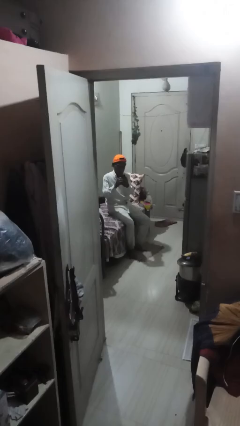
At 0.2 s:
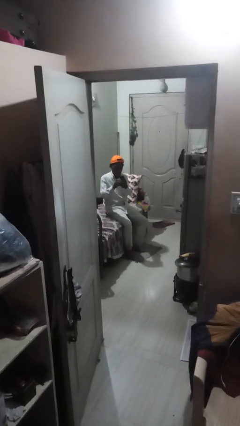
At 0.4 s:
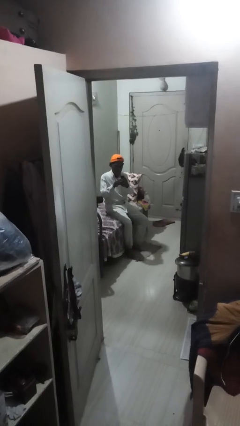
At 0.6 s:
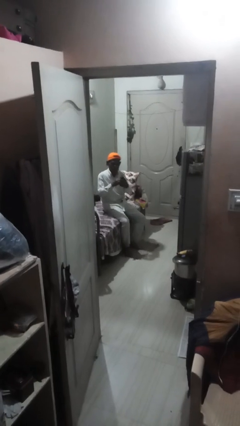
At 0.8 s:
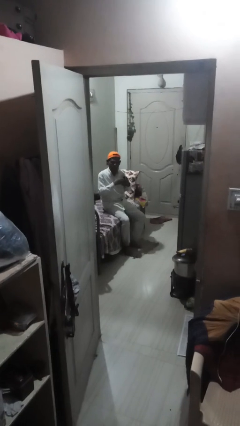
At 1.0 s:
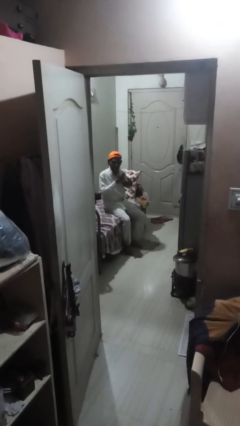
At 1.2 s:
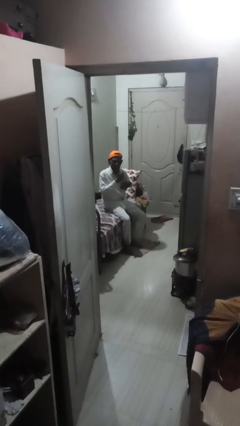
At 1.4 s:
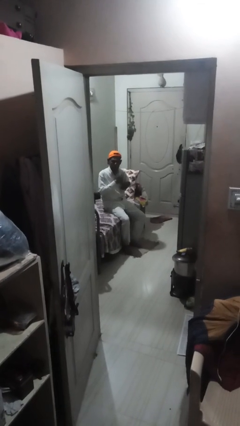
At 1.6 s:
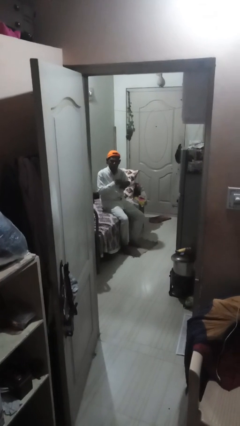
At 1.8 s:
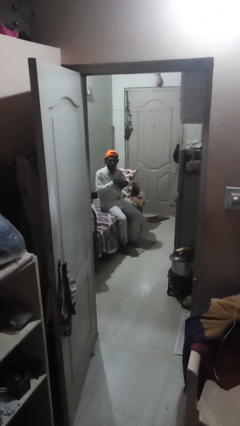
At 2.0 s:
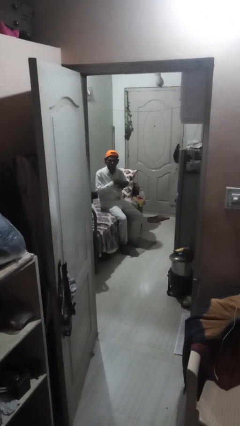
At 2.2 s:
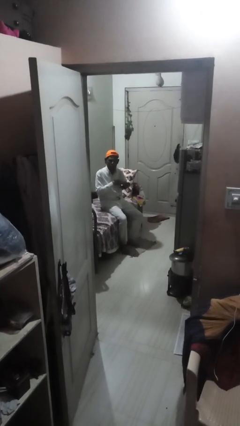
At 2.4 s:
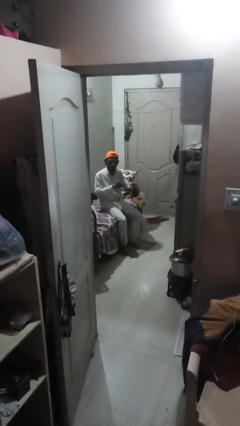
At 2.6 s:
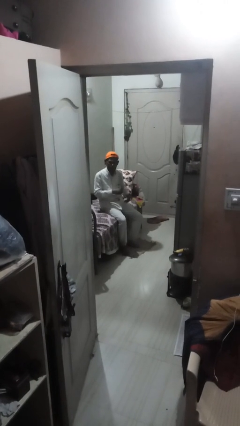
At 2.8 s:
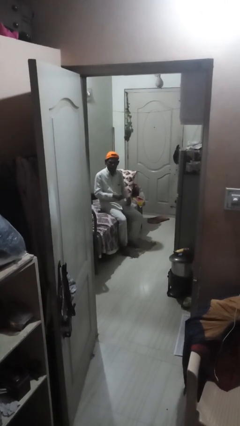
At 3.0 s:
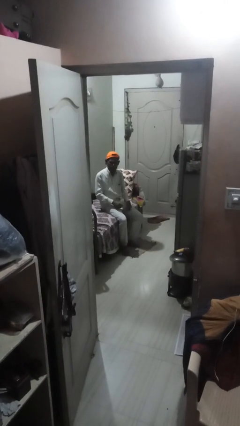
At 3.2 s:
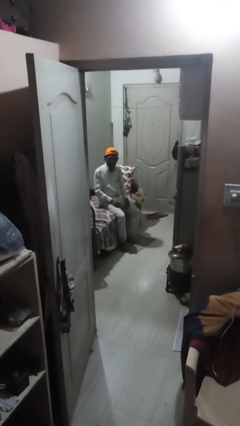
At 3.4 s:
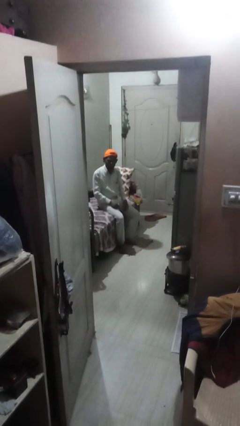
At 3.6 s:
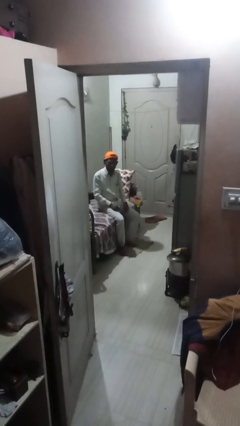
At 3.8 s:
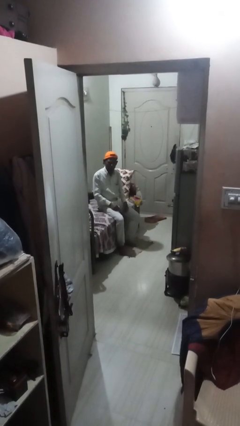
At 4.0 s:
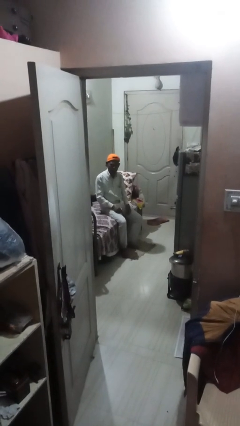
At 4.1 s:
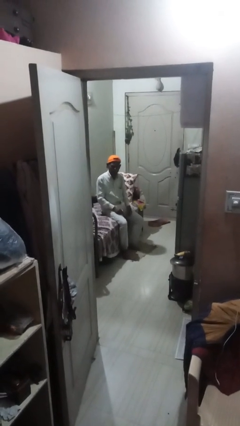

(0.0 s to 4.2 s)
person puts phone into pocket

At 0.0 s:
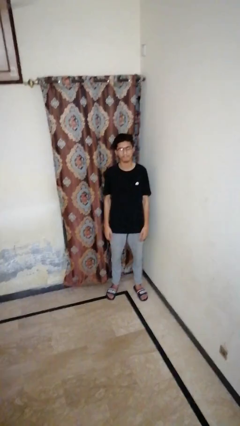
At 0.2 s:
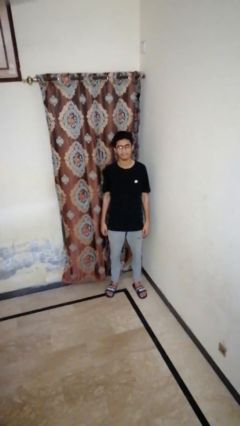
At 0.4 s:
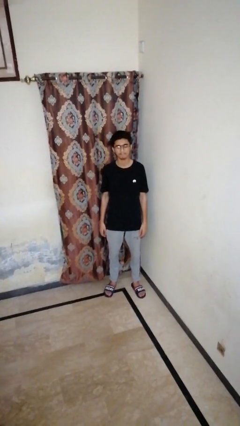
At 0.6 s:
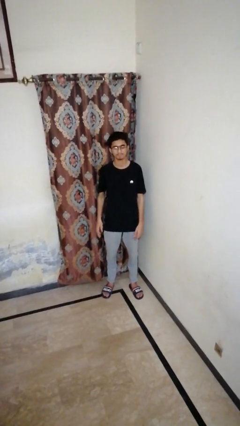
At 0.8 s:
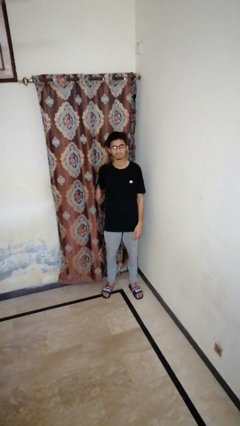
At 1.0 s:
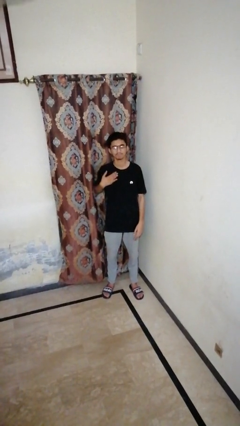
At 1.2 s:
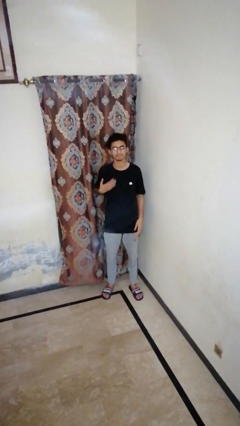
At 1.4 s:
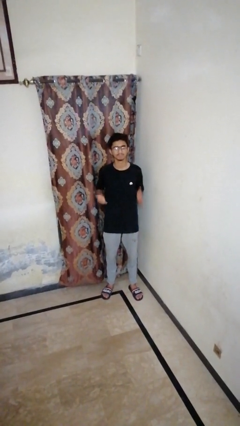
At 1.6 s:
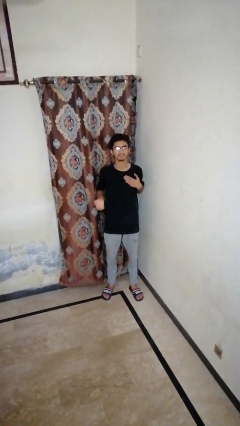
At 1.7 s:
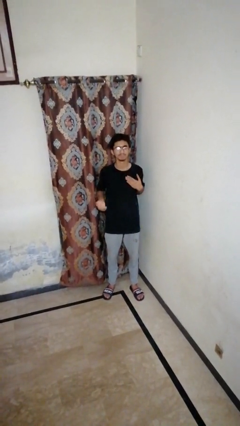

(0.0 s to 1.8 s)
person drums on chest

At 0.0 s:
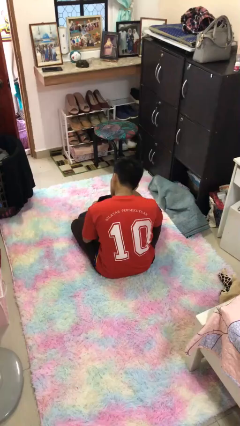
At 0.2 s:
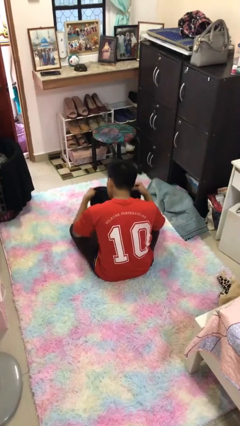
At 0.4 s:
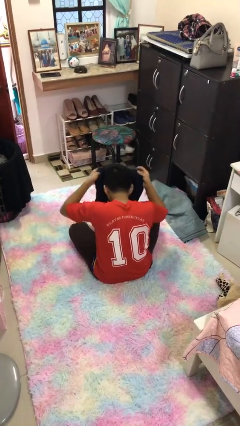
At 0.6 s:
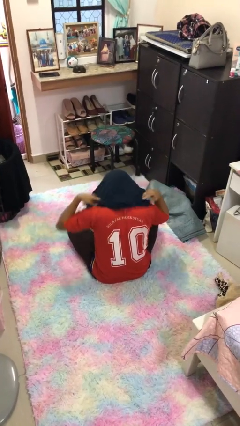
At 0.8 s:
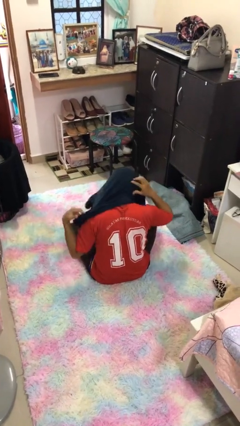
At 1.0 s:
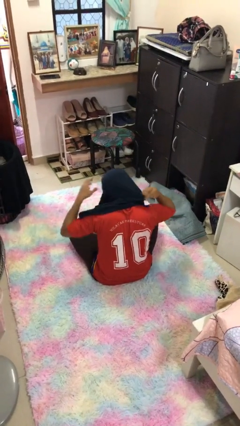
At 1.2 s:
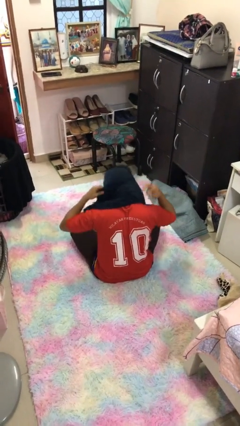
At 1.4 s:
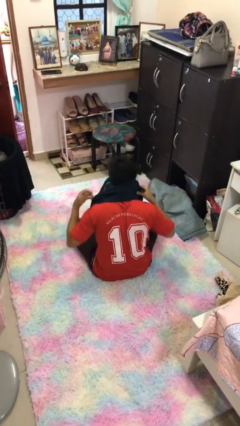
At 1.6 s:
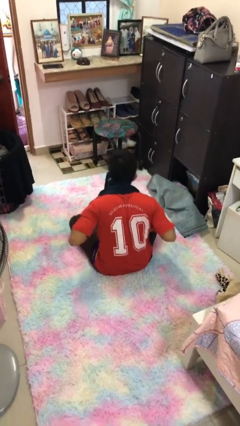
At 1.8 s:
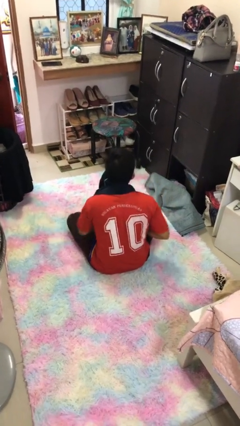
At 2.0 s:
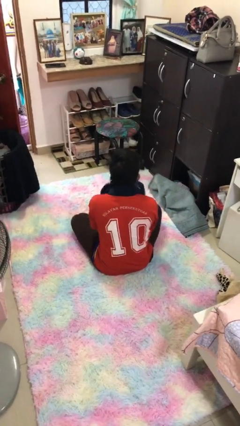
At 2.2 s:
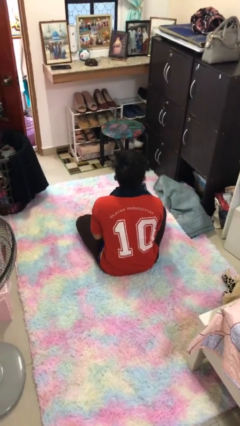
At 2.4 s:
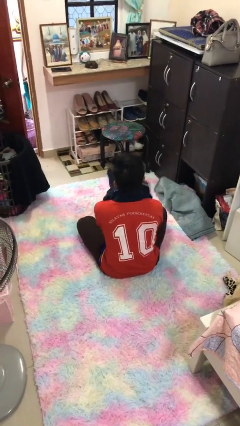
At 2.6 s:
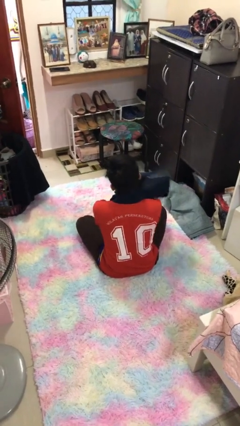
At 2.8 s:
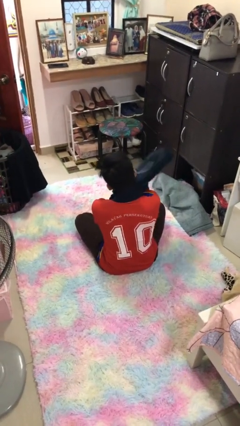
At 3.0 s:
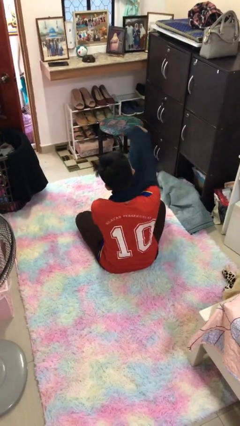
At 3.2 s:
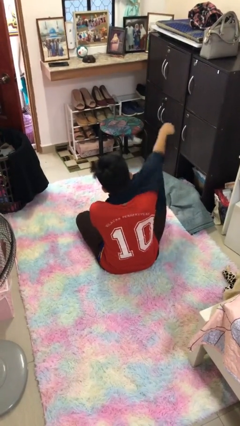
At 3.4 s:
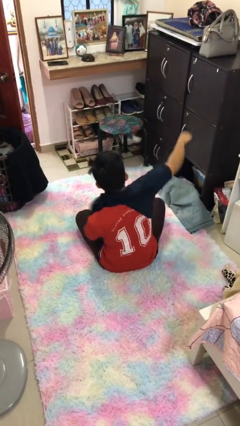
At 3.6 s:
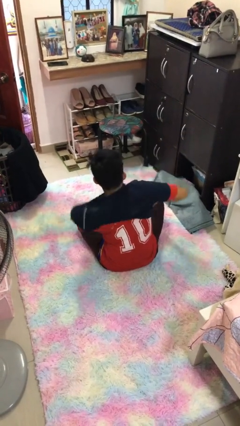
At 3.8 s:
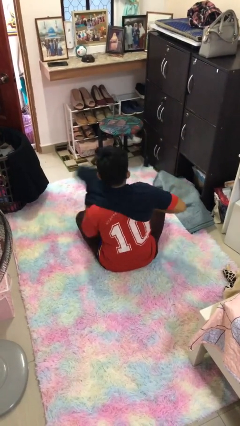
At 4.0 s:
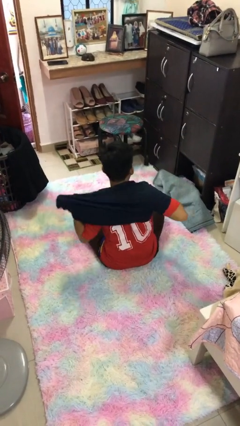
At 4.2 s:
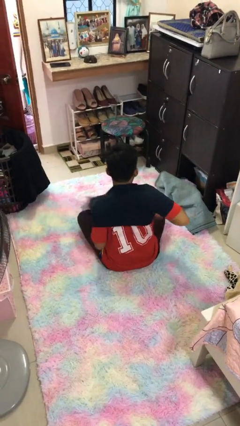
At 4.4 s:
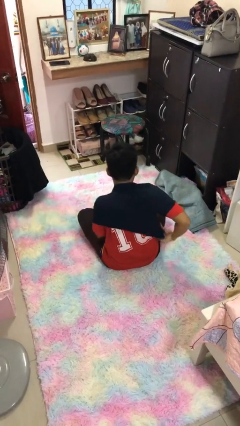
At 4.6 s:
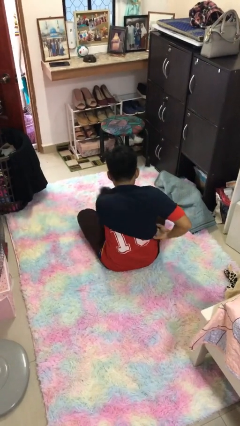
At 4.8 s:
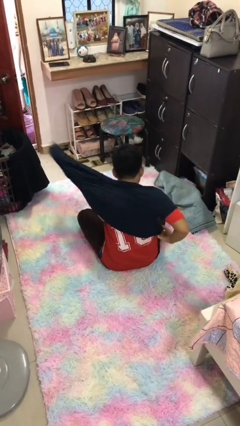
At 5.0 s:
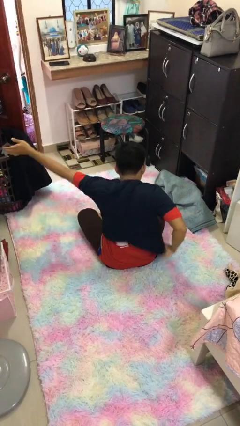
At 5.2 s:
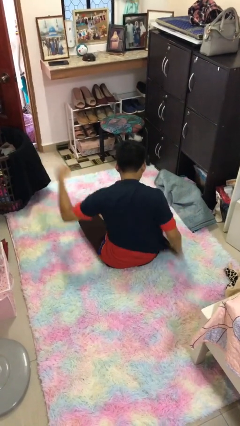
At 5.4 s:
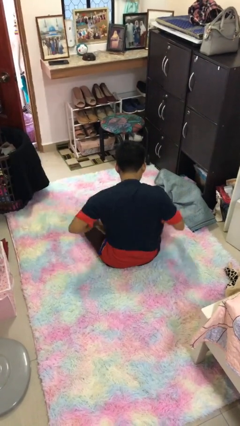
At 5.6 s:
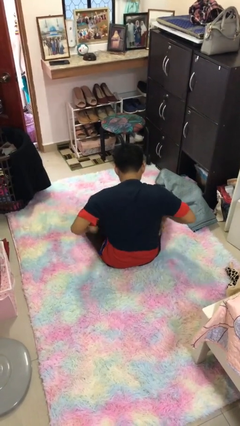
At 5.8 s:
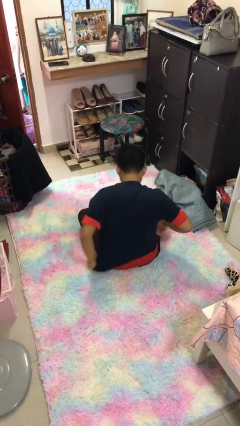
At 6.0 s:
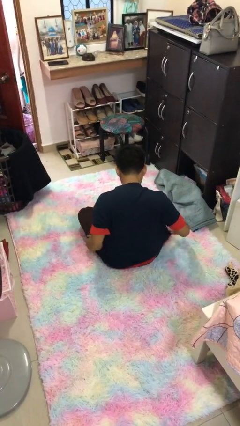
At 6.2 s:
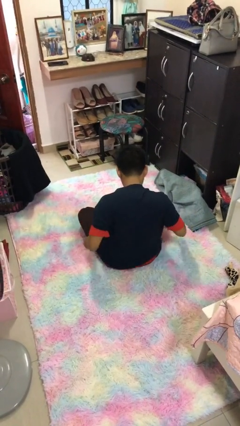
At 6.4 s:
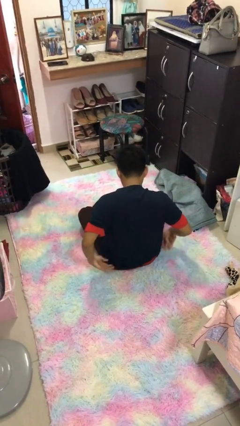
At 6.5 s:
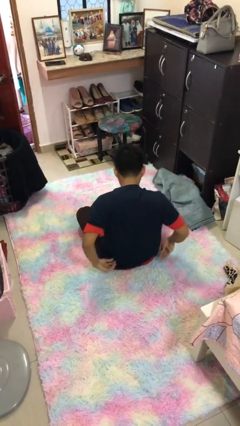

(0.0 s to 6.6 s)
person puts on shirt

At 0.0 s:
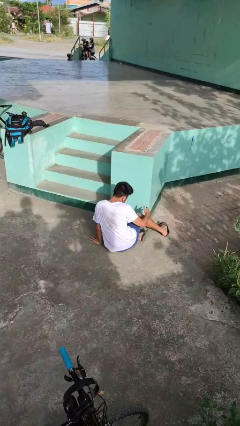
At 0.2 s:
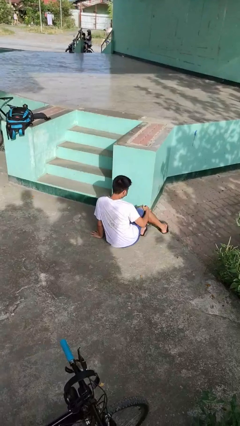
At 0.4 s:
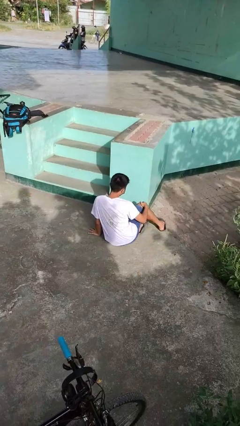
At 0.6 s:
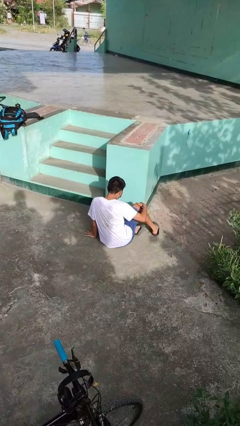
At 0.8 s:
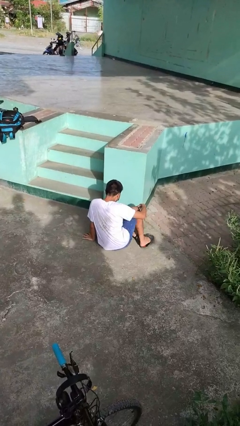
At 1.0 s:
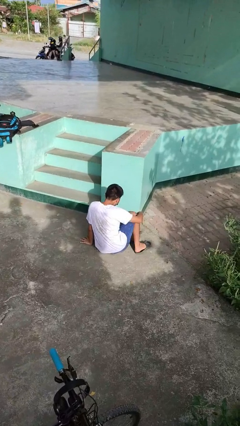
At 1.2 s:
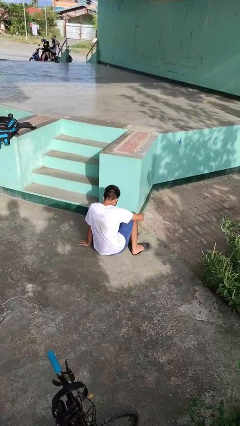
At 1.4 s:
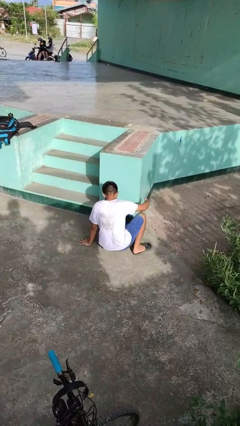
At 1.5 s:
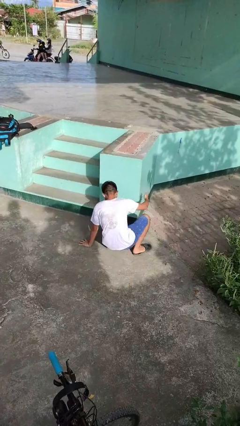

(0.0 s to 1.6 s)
person lies down on floor

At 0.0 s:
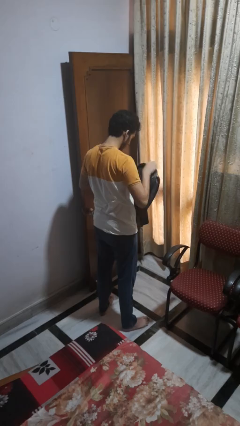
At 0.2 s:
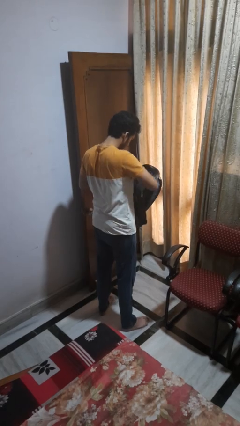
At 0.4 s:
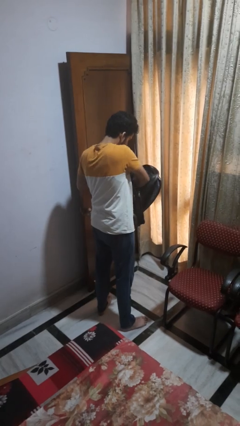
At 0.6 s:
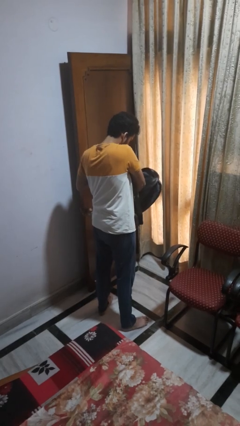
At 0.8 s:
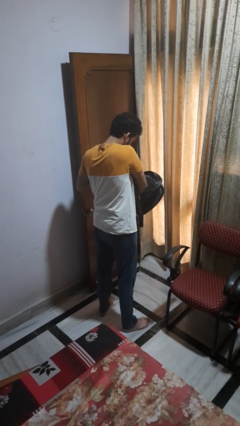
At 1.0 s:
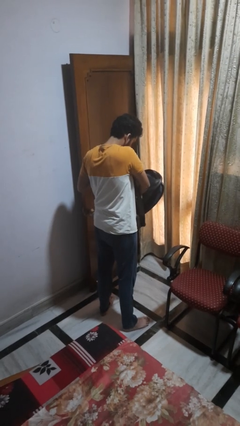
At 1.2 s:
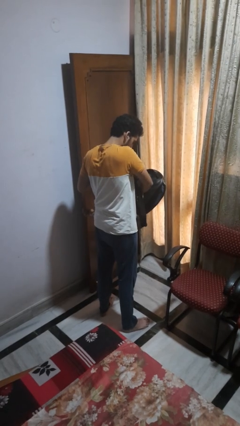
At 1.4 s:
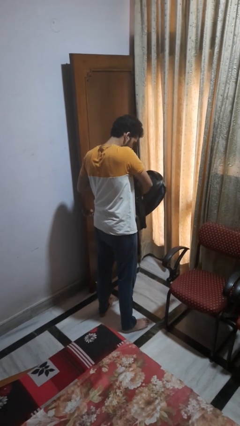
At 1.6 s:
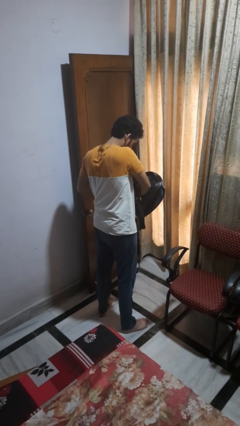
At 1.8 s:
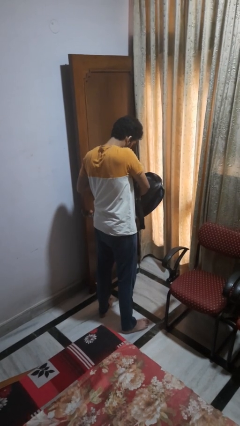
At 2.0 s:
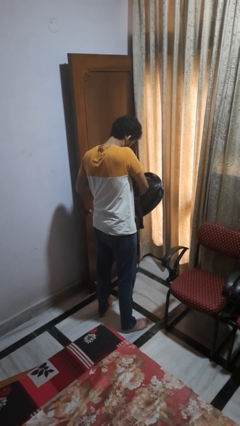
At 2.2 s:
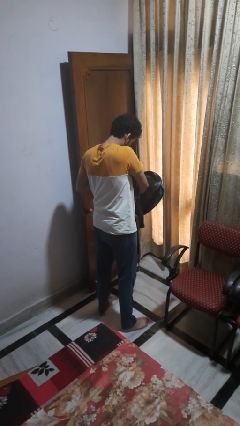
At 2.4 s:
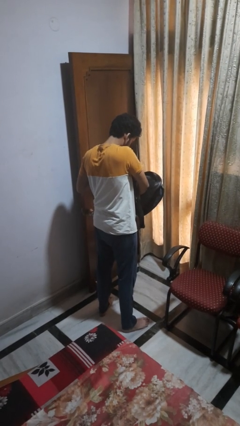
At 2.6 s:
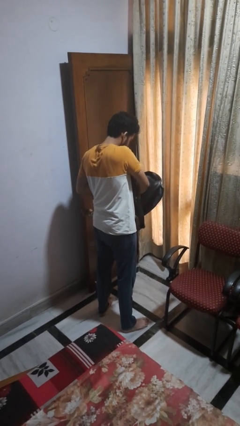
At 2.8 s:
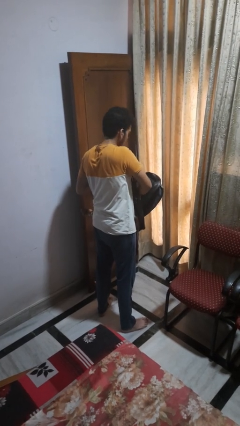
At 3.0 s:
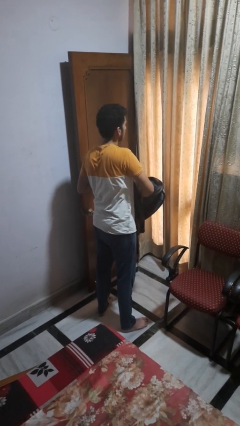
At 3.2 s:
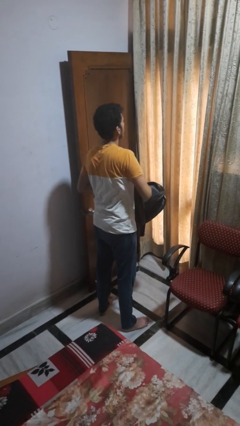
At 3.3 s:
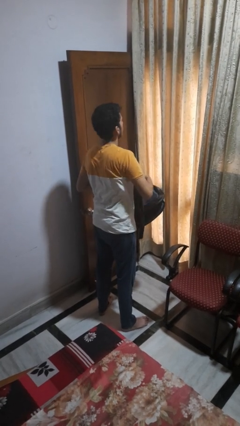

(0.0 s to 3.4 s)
person searches in backpack
